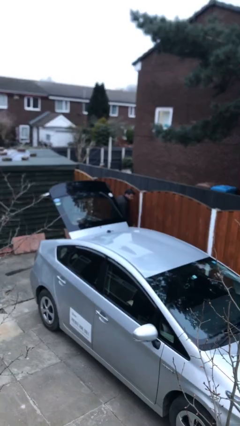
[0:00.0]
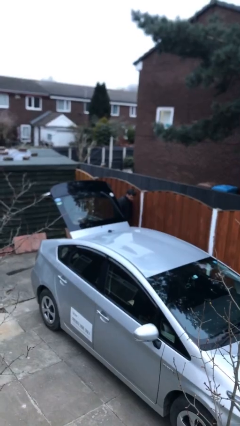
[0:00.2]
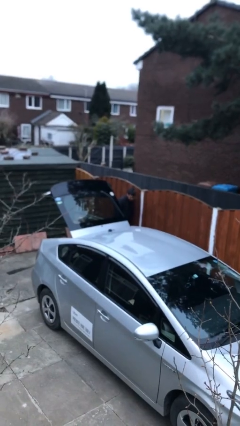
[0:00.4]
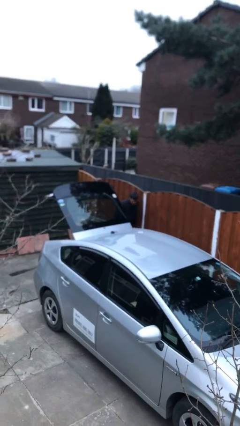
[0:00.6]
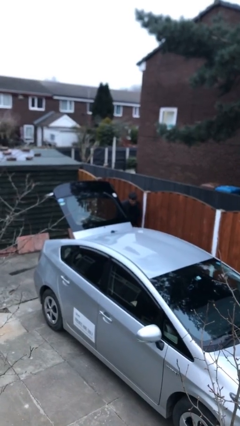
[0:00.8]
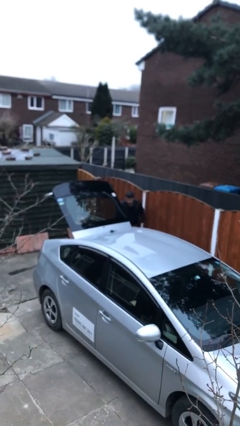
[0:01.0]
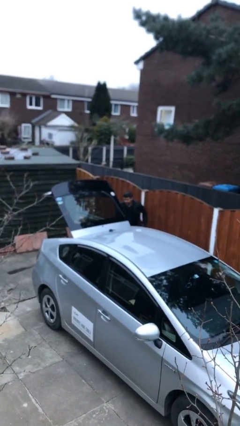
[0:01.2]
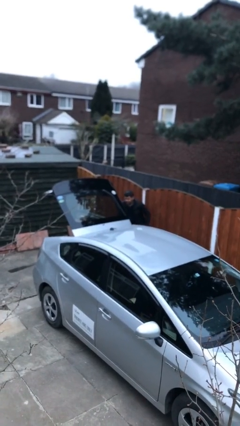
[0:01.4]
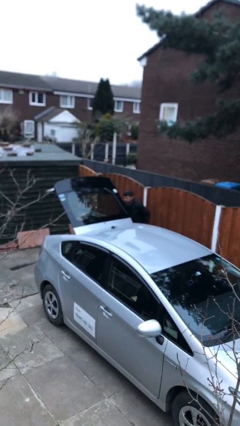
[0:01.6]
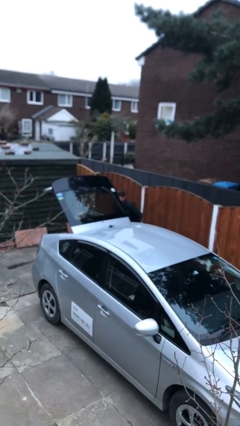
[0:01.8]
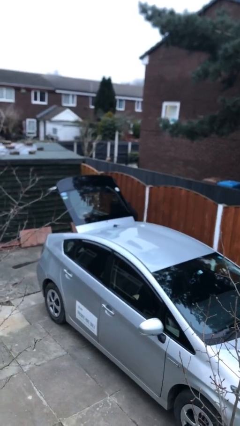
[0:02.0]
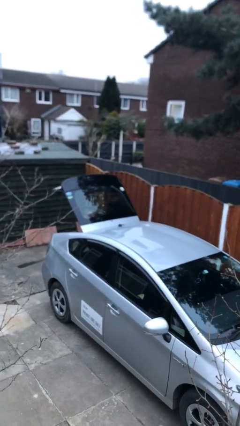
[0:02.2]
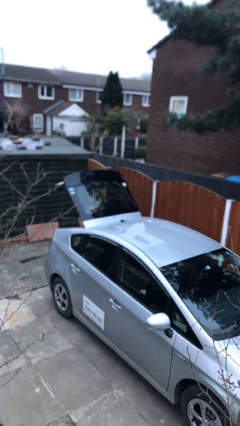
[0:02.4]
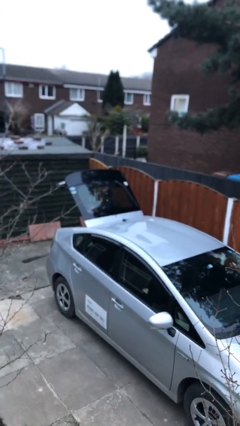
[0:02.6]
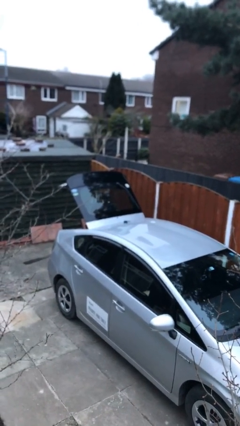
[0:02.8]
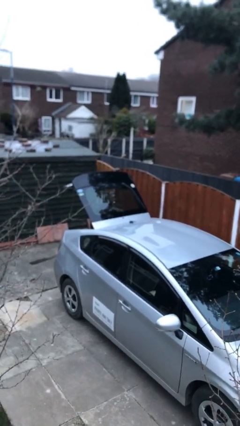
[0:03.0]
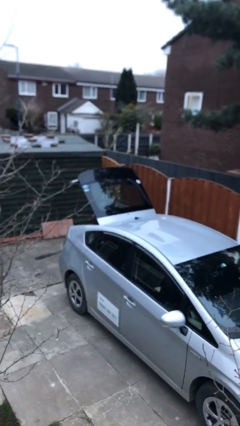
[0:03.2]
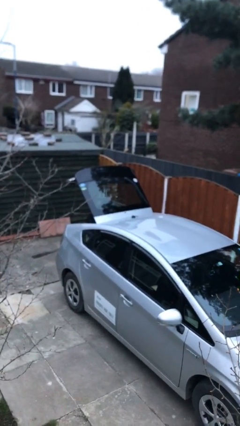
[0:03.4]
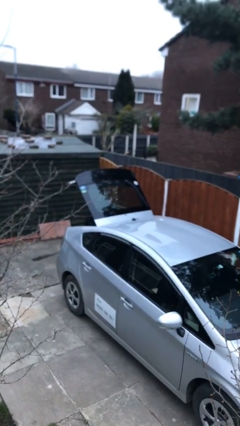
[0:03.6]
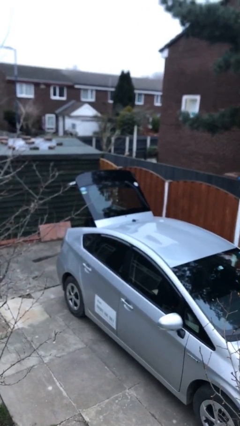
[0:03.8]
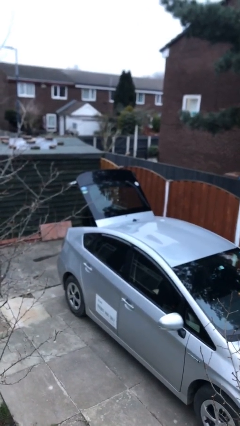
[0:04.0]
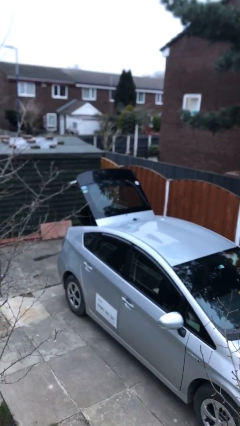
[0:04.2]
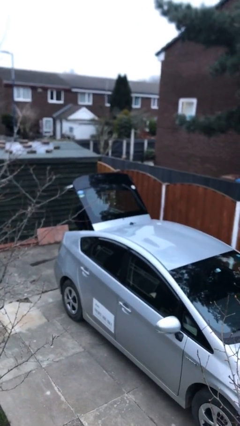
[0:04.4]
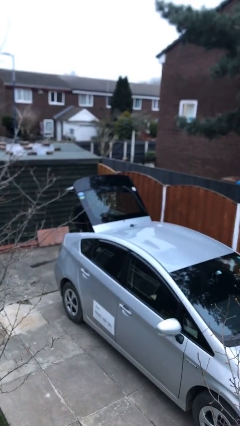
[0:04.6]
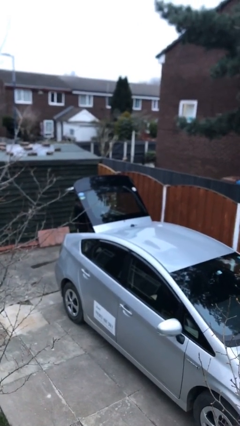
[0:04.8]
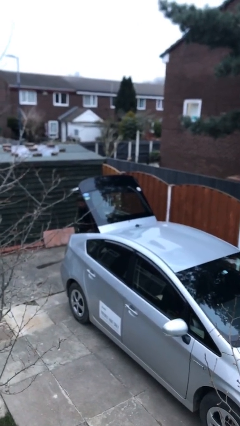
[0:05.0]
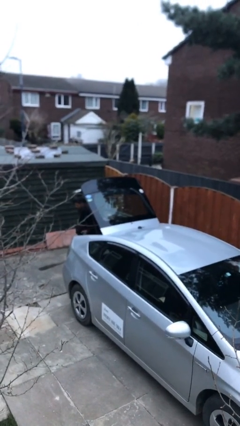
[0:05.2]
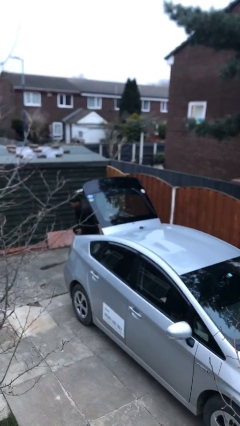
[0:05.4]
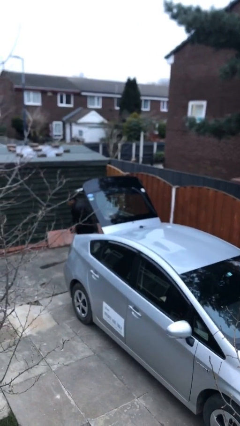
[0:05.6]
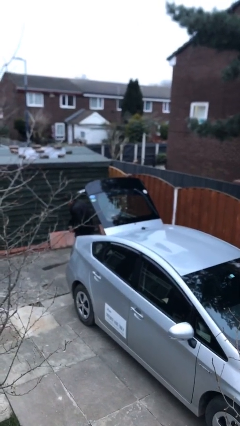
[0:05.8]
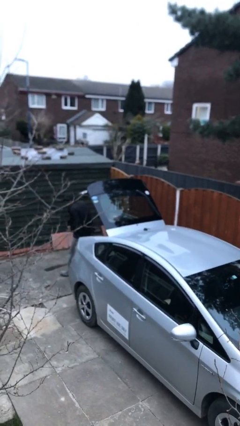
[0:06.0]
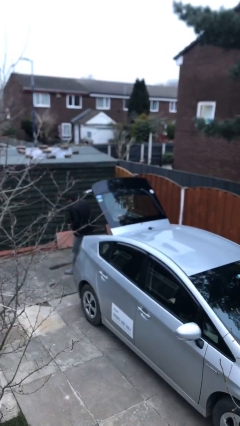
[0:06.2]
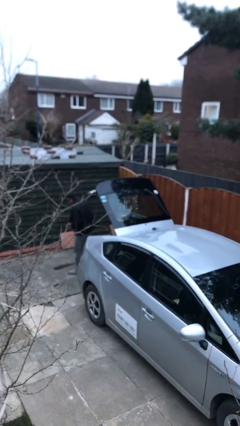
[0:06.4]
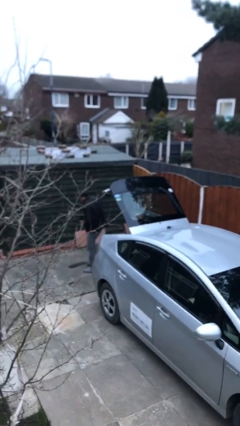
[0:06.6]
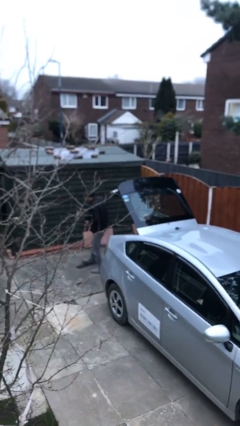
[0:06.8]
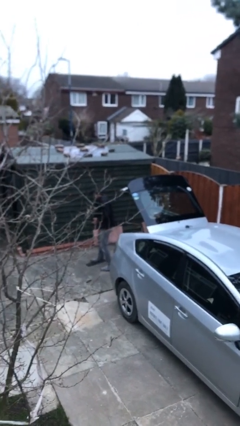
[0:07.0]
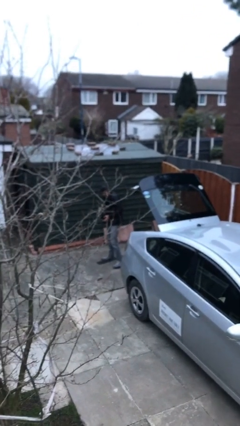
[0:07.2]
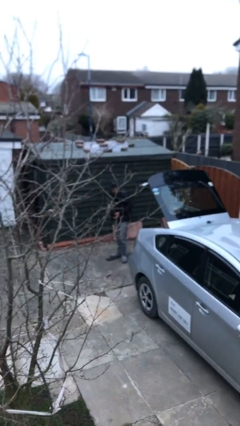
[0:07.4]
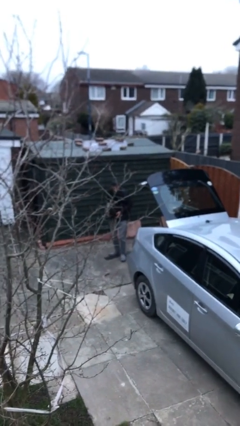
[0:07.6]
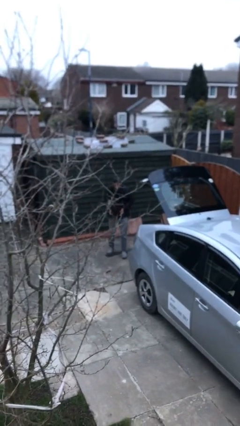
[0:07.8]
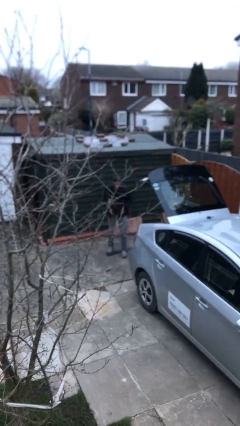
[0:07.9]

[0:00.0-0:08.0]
person unloads car

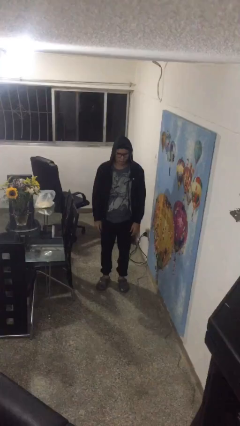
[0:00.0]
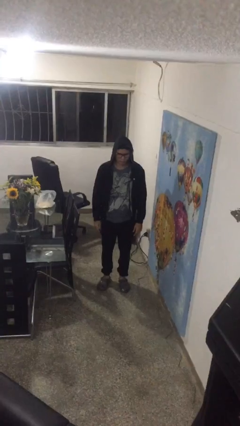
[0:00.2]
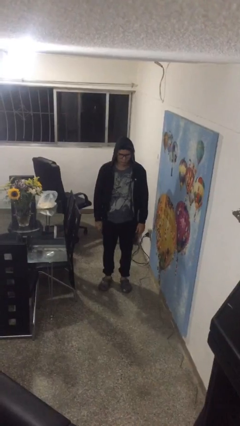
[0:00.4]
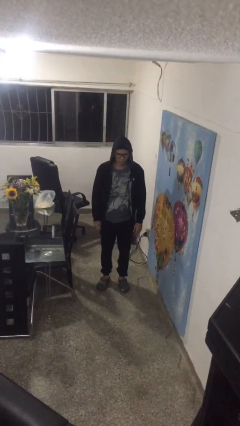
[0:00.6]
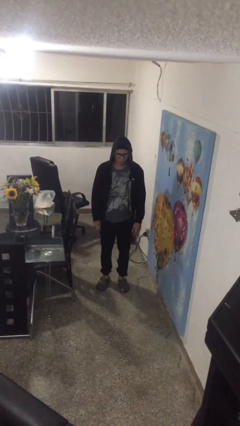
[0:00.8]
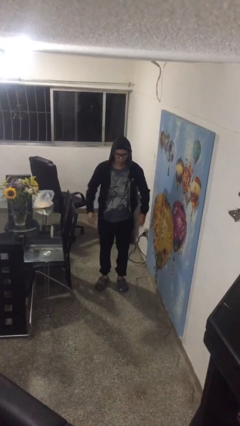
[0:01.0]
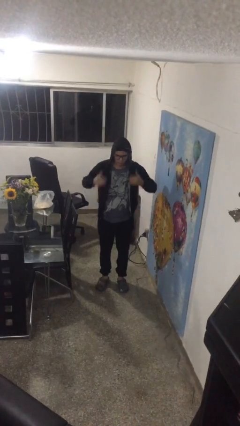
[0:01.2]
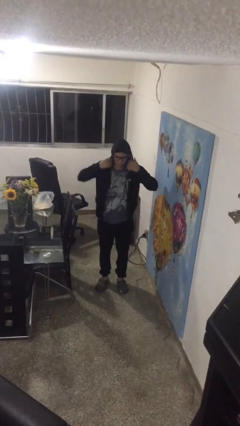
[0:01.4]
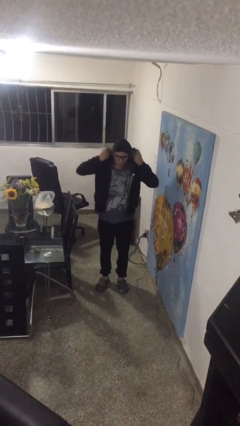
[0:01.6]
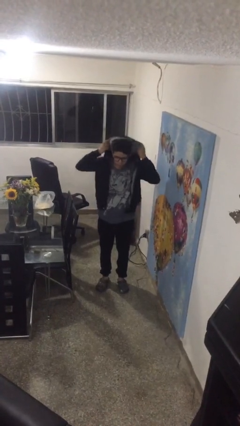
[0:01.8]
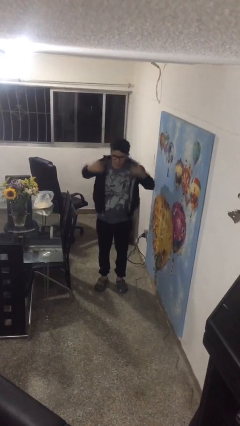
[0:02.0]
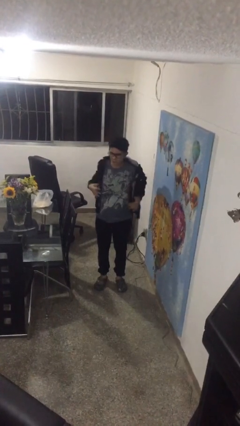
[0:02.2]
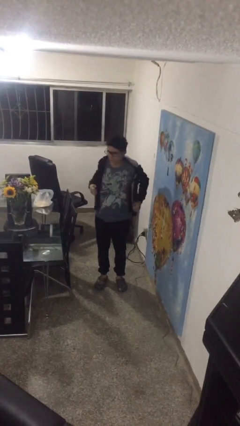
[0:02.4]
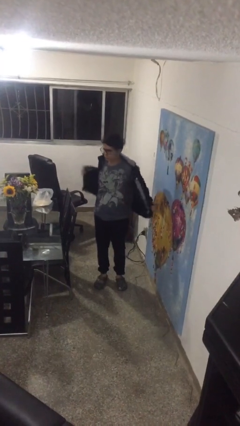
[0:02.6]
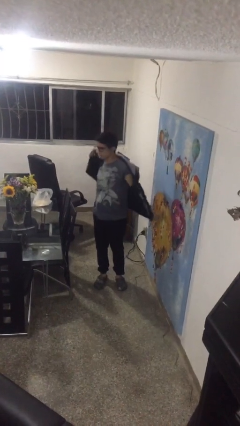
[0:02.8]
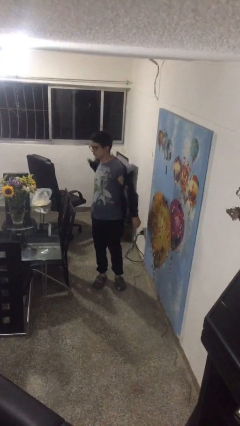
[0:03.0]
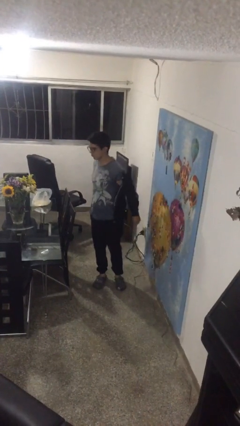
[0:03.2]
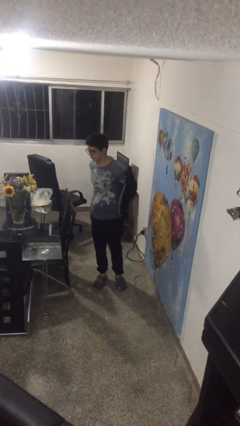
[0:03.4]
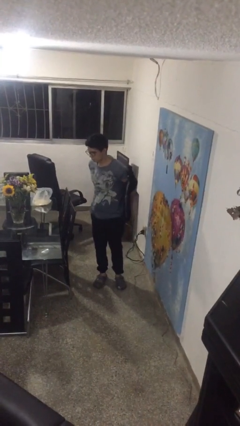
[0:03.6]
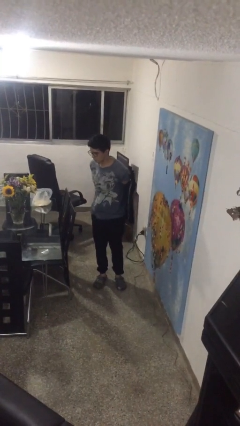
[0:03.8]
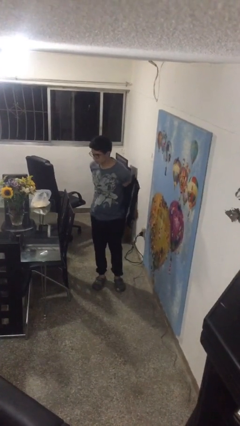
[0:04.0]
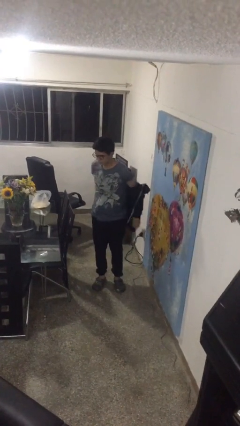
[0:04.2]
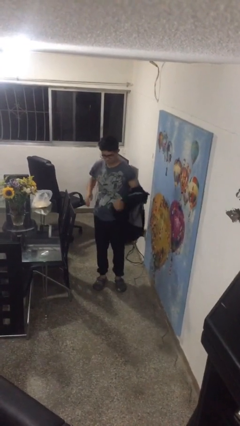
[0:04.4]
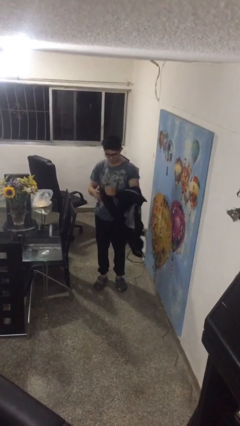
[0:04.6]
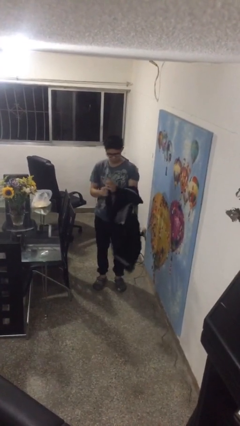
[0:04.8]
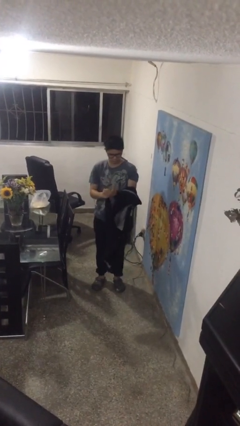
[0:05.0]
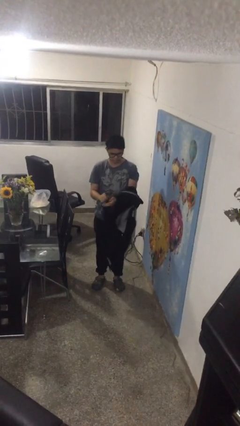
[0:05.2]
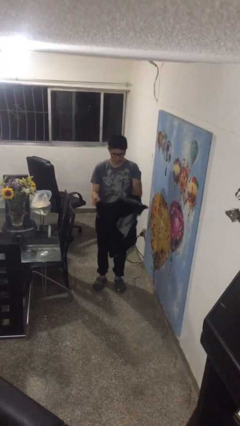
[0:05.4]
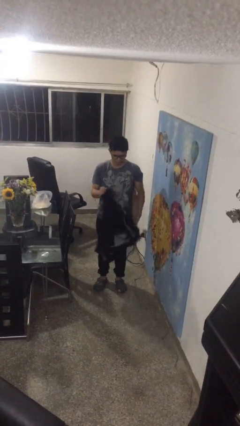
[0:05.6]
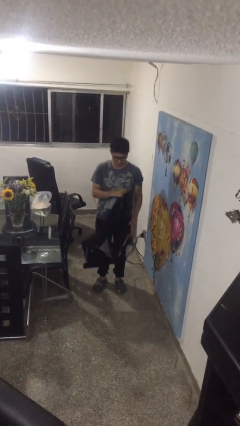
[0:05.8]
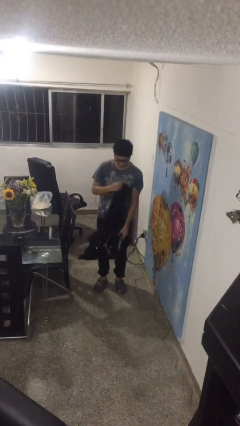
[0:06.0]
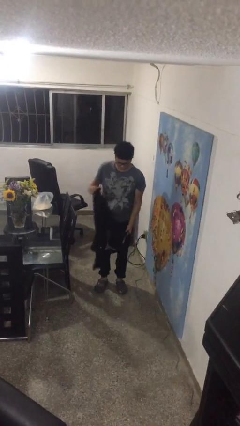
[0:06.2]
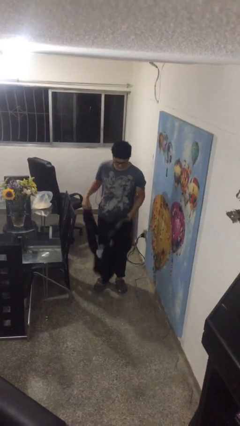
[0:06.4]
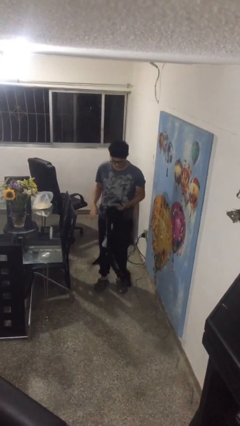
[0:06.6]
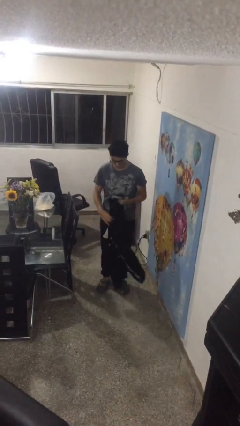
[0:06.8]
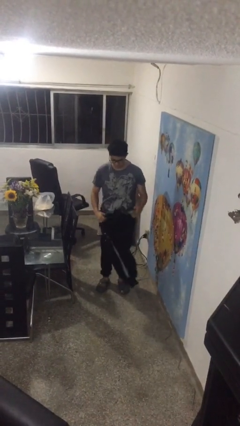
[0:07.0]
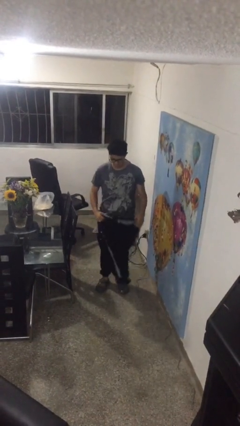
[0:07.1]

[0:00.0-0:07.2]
person takes off hoodie

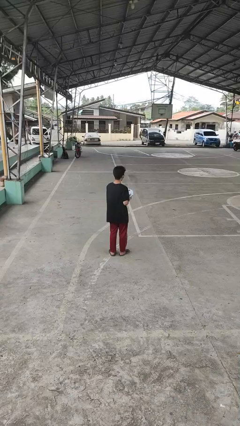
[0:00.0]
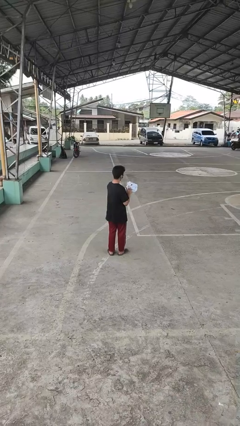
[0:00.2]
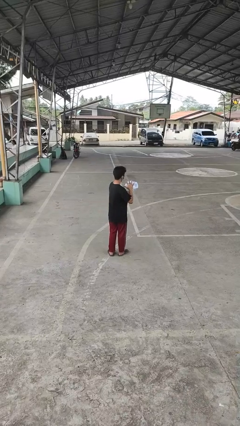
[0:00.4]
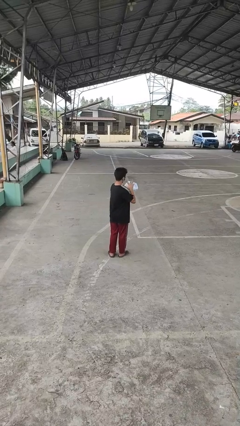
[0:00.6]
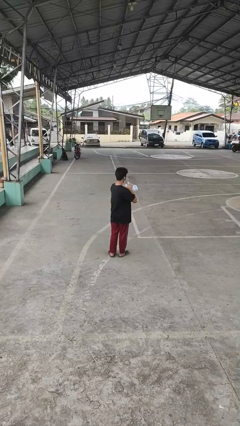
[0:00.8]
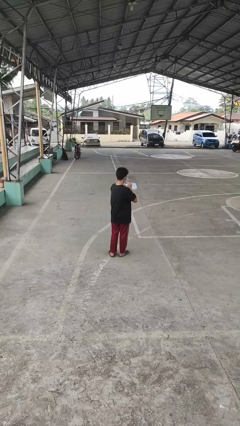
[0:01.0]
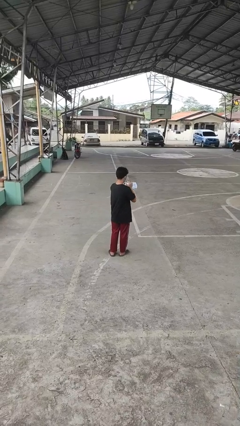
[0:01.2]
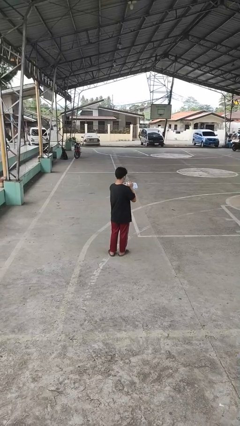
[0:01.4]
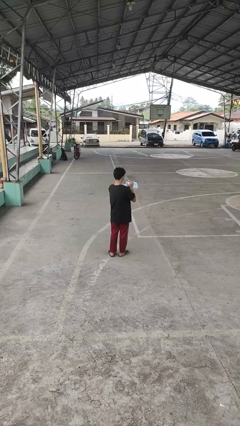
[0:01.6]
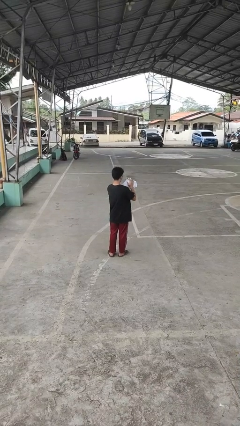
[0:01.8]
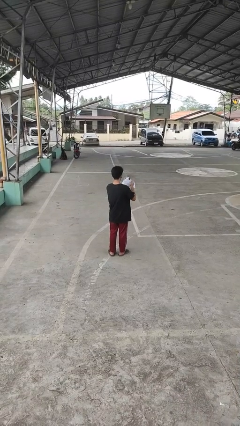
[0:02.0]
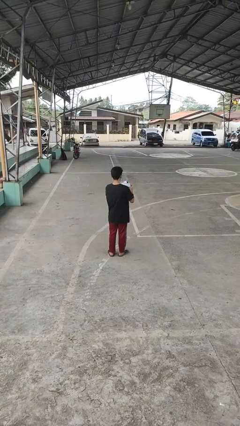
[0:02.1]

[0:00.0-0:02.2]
person squeezes object

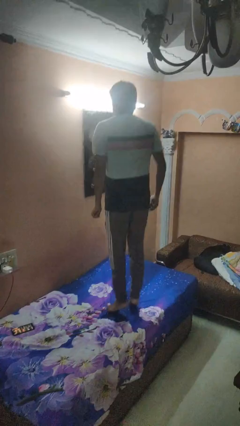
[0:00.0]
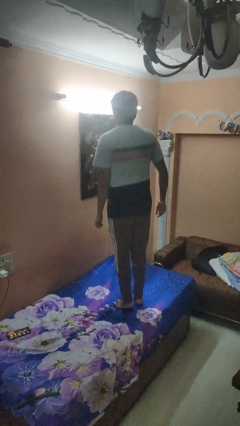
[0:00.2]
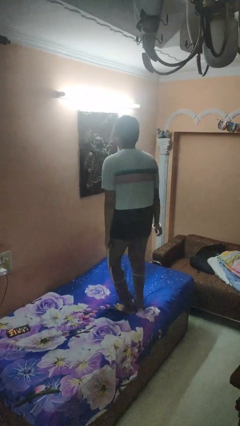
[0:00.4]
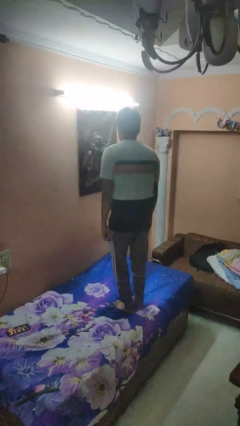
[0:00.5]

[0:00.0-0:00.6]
person jumps on bed
